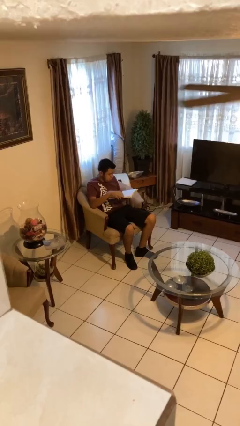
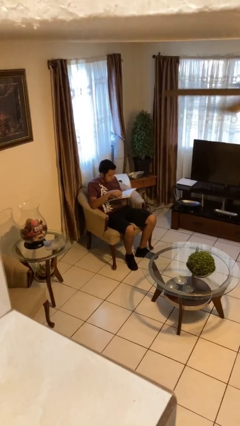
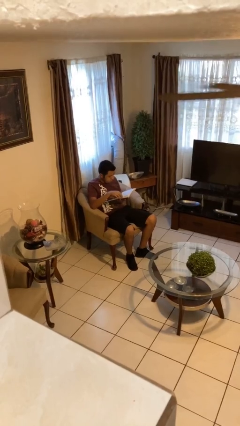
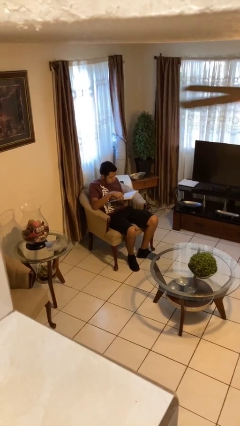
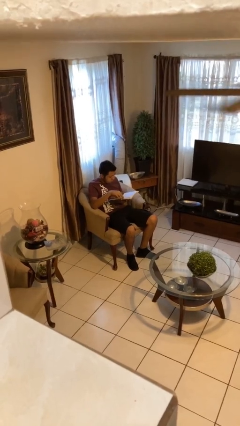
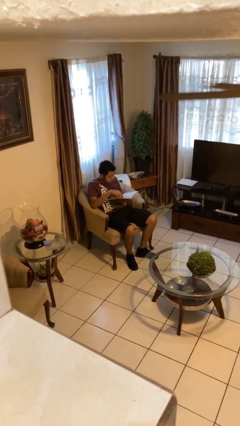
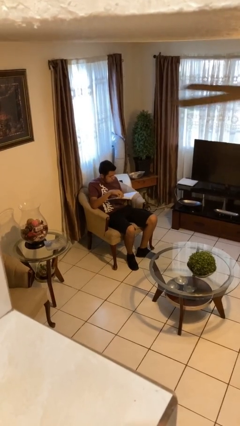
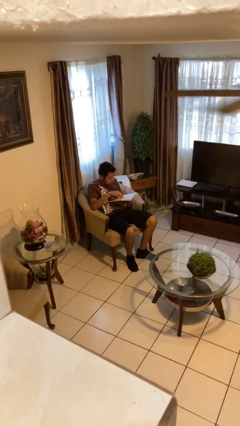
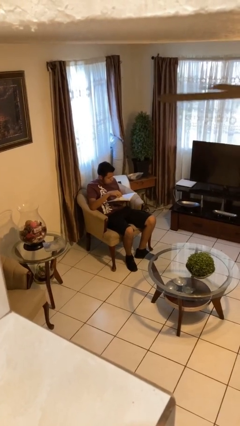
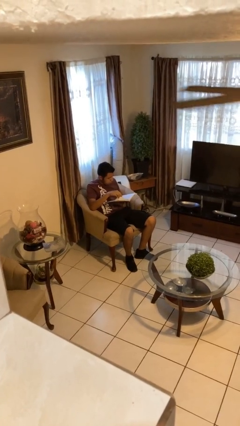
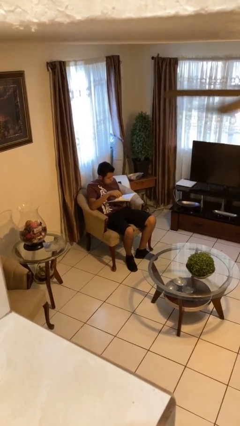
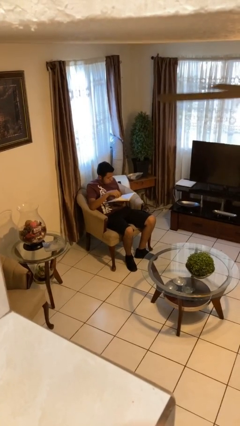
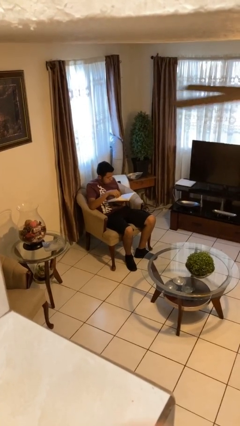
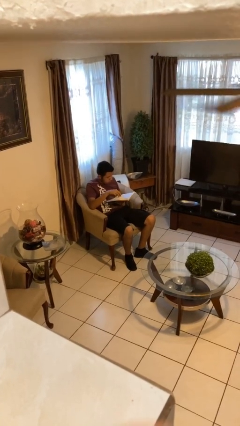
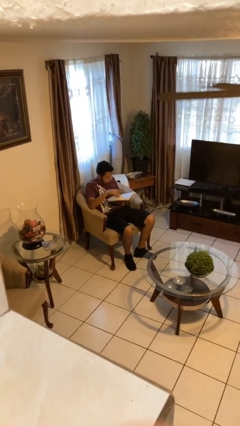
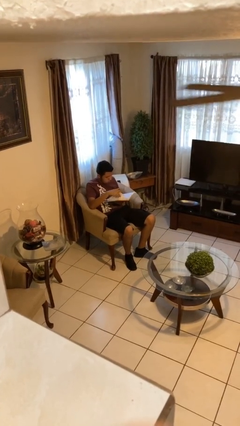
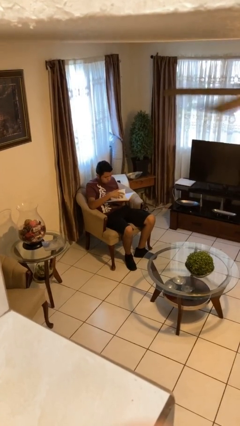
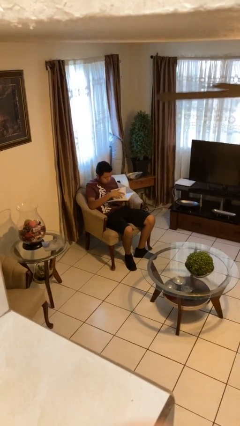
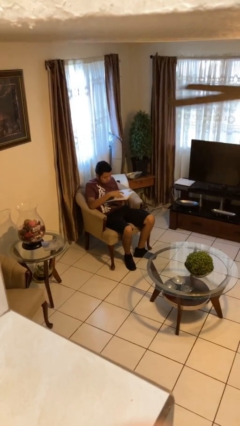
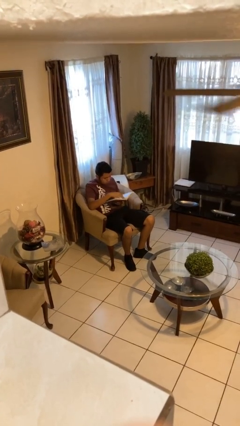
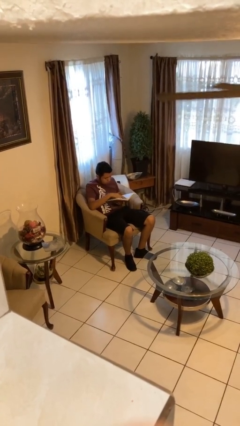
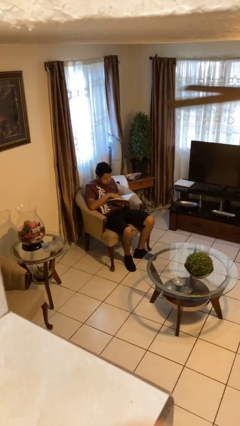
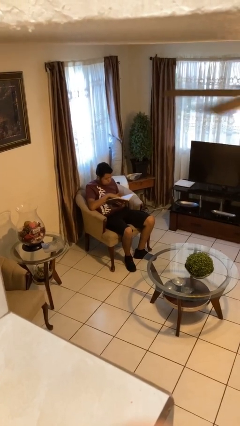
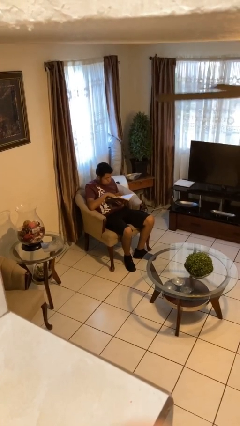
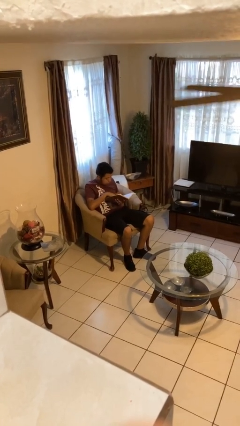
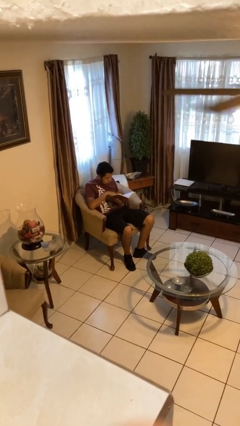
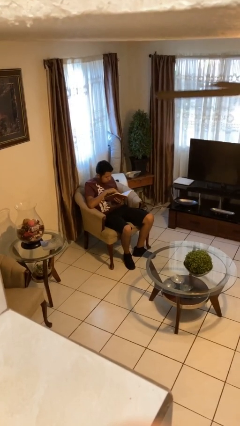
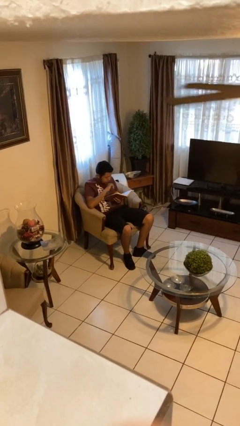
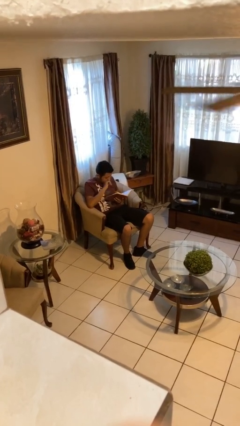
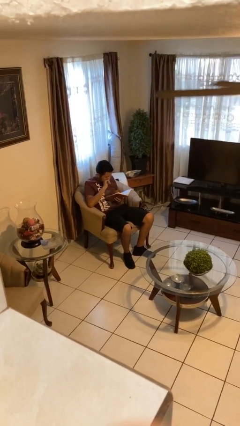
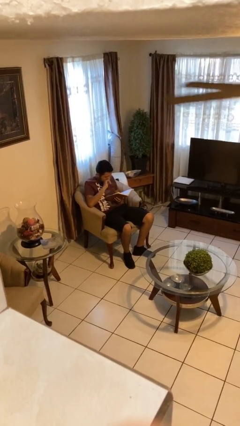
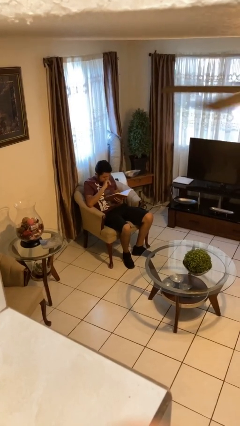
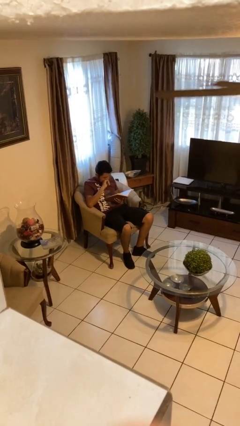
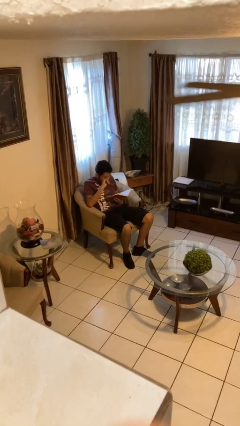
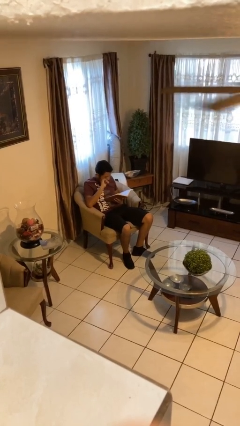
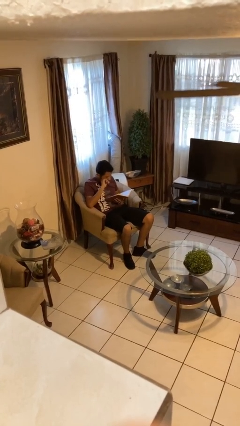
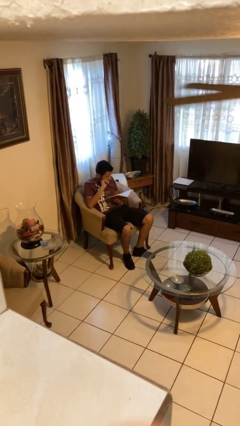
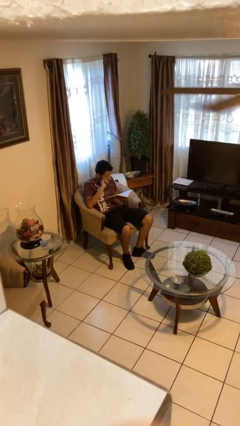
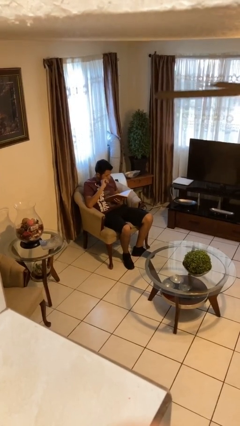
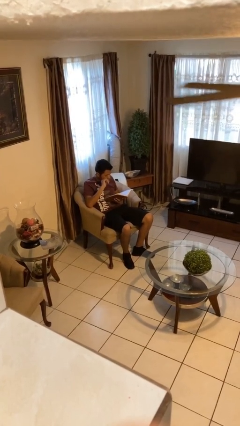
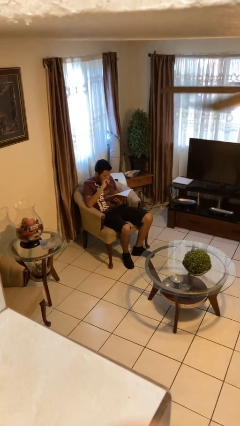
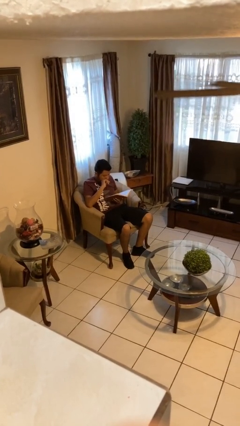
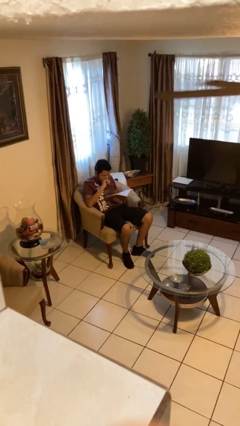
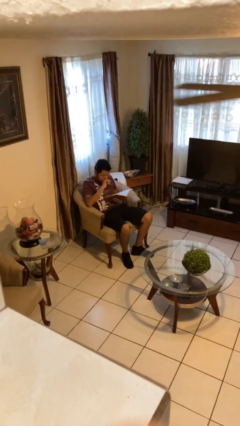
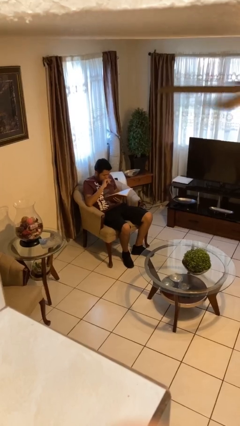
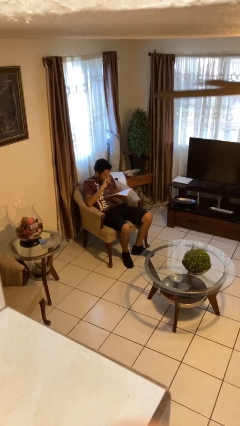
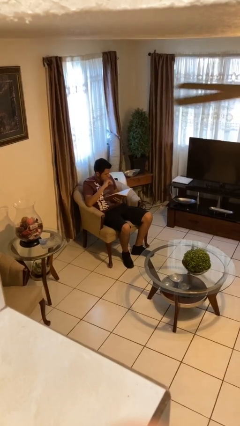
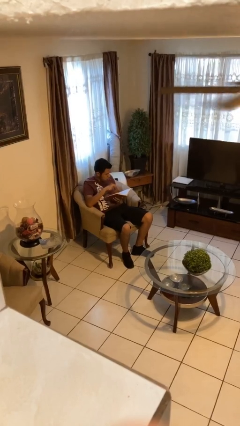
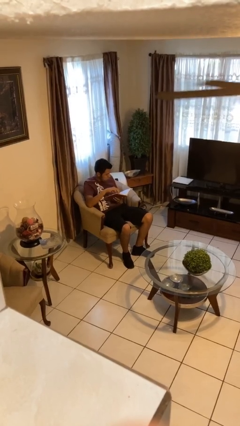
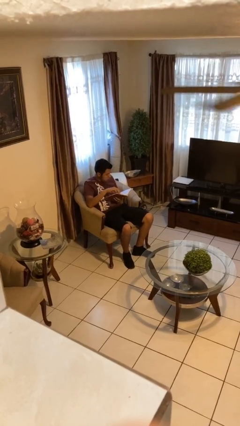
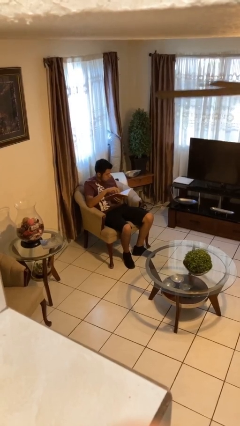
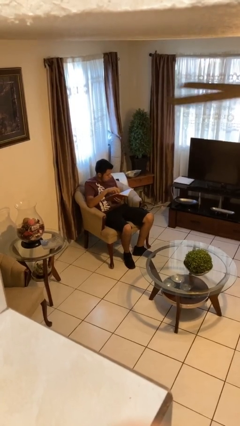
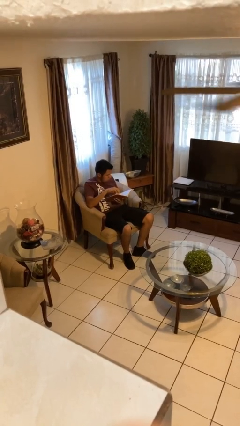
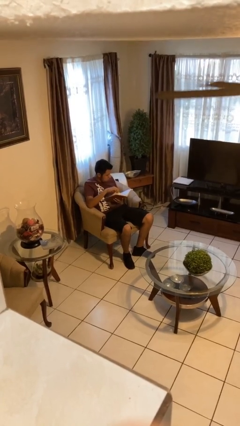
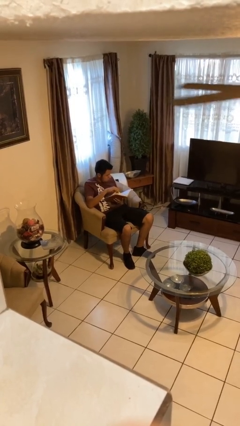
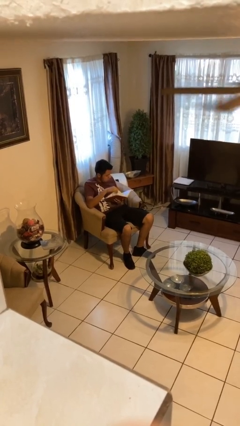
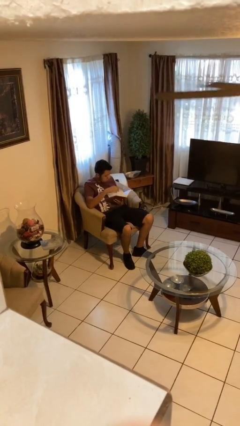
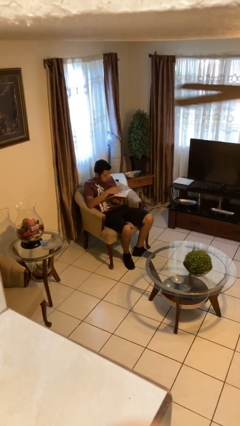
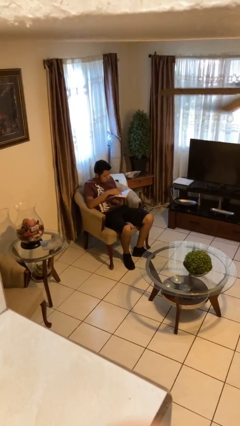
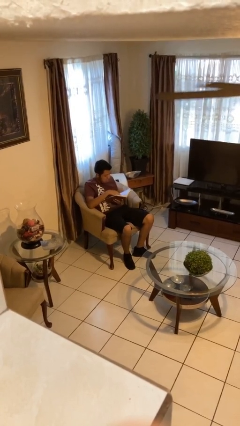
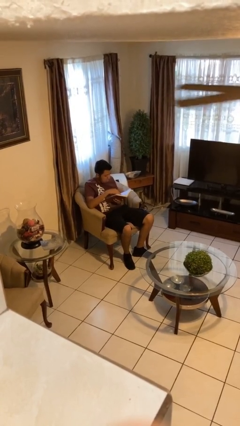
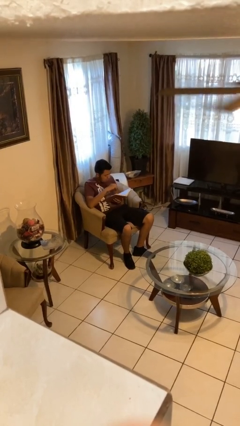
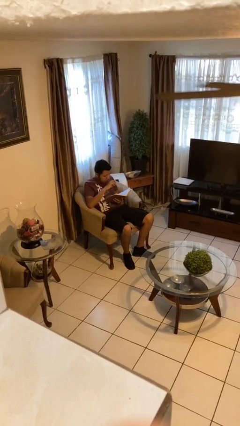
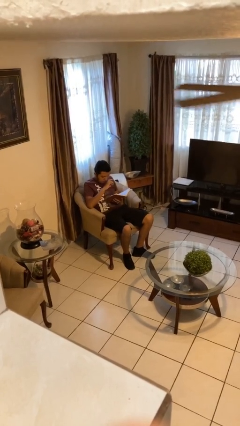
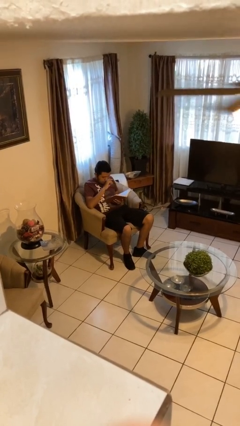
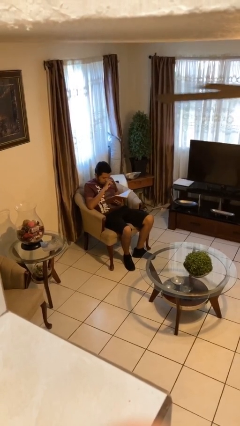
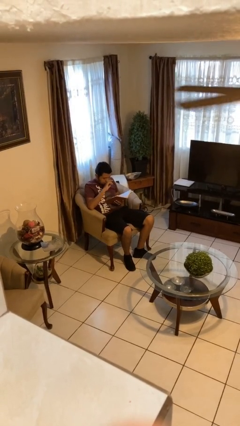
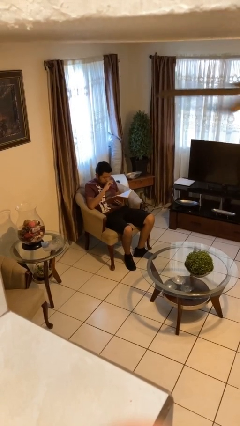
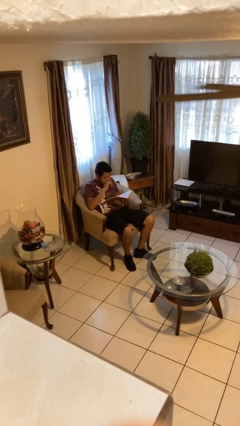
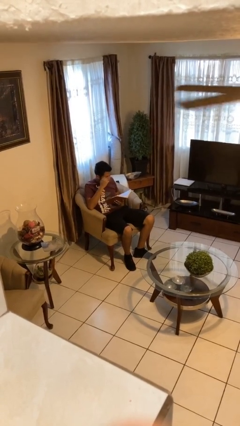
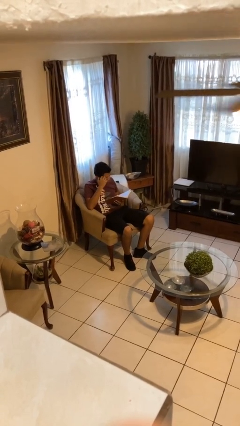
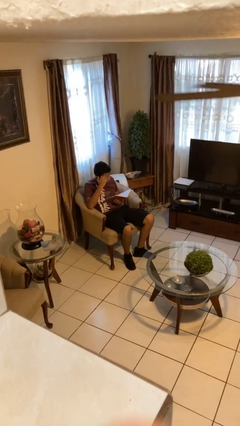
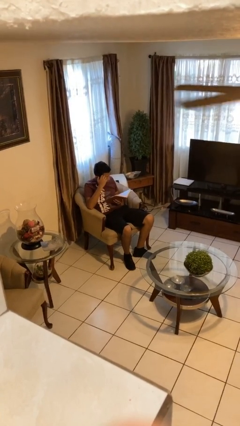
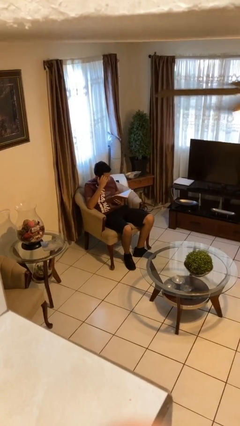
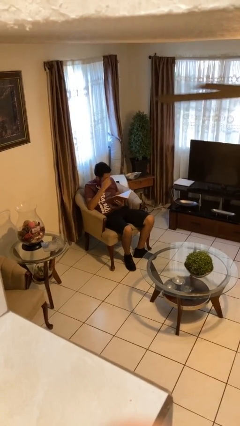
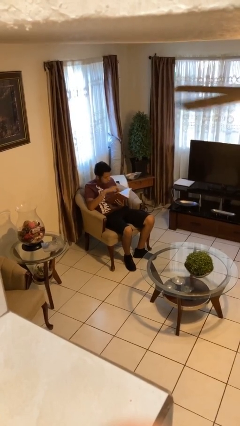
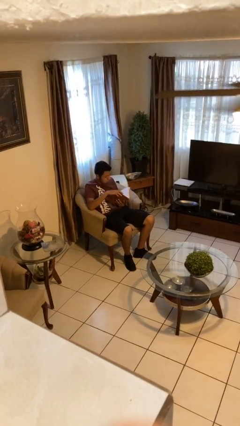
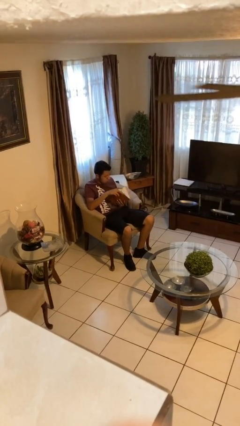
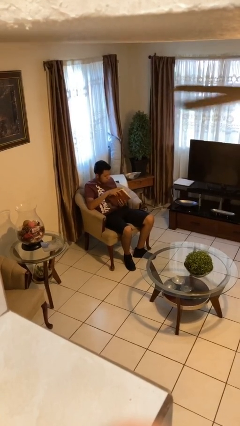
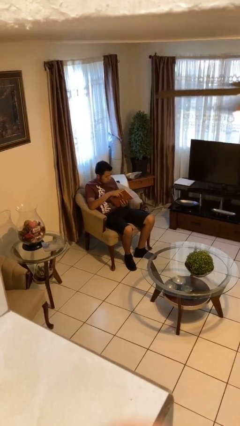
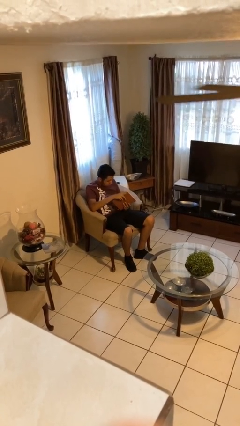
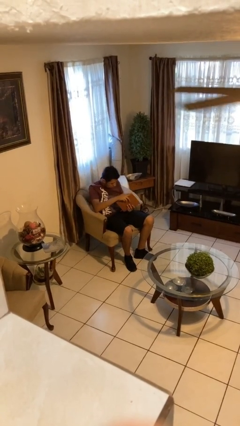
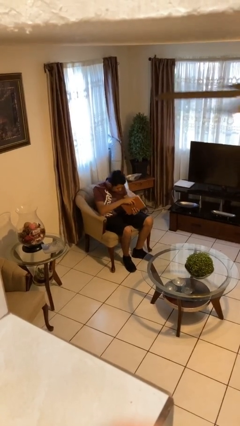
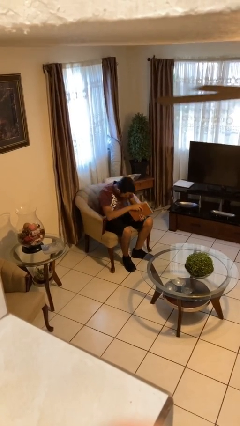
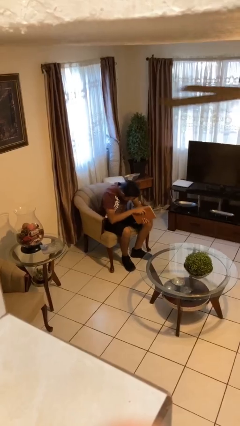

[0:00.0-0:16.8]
person reads document

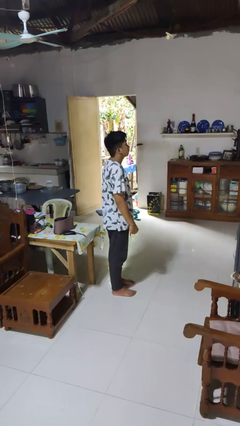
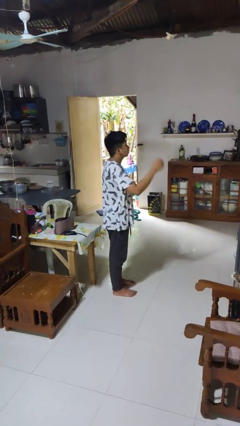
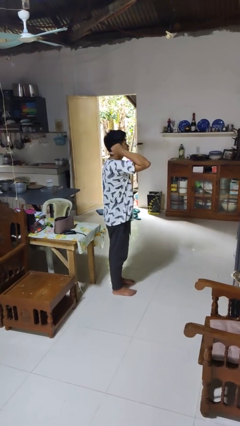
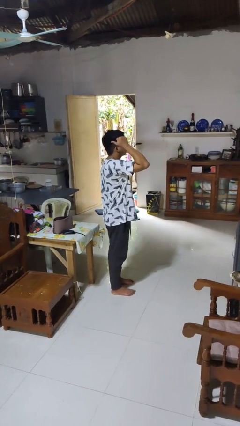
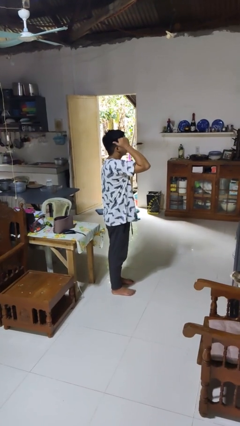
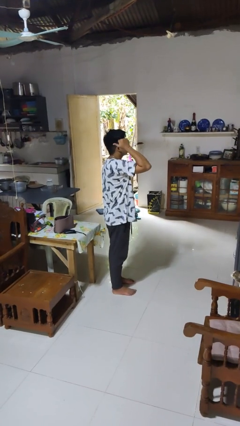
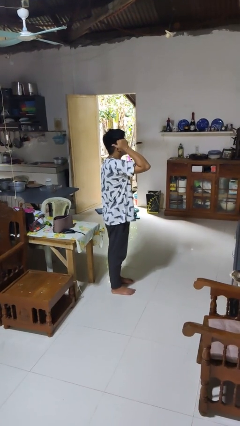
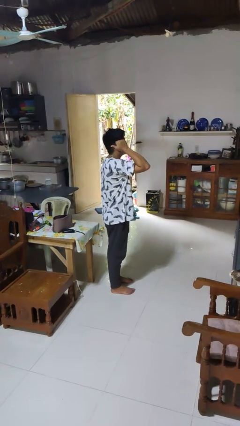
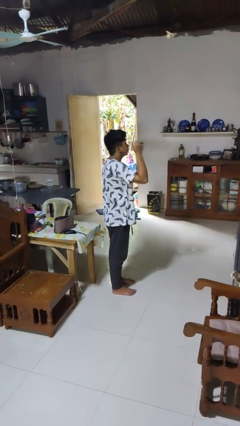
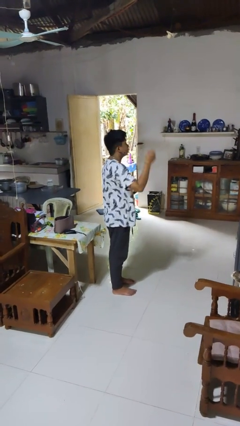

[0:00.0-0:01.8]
person gestures behind me
